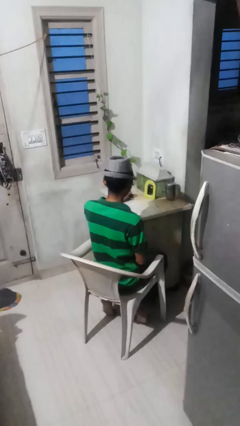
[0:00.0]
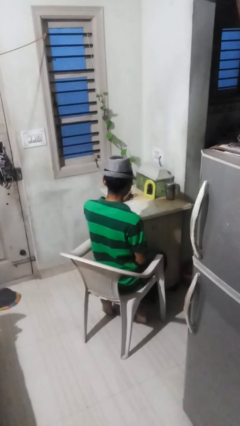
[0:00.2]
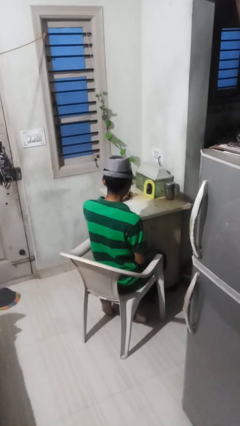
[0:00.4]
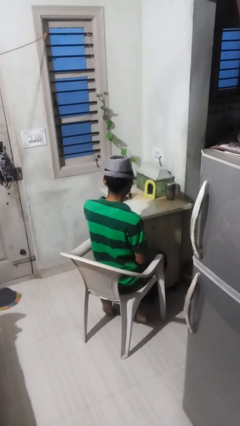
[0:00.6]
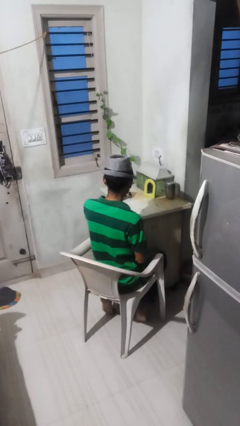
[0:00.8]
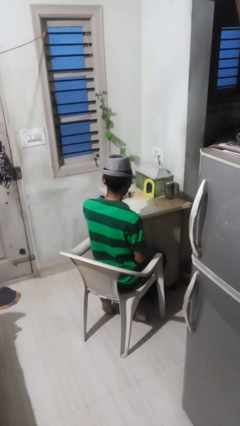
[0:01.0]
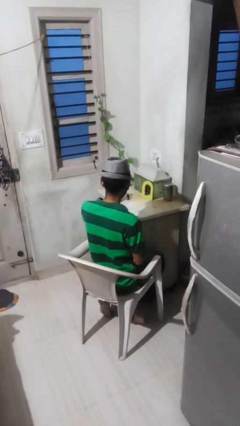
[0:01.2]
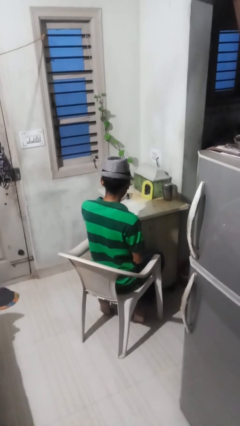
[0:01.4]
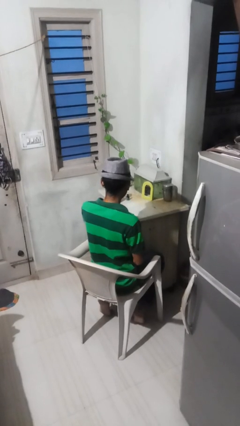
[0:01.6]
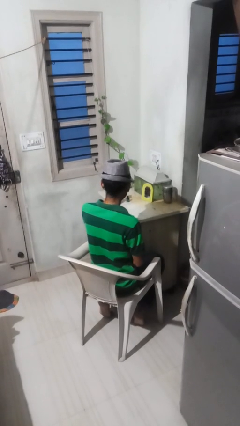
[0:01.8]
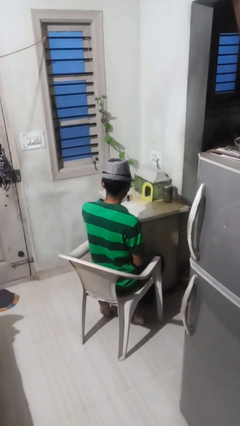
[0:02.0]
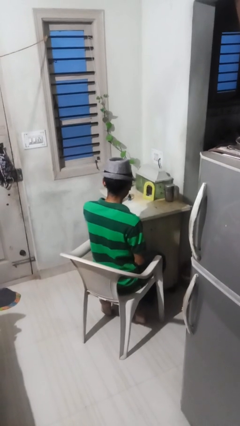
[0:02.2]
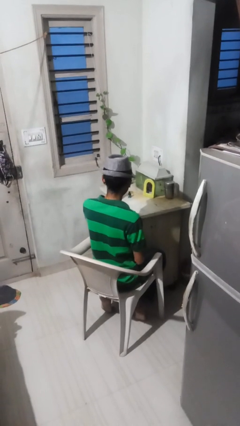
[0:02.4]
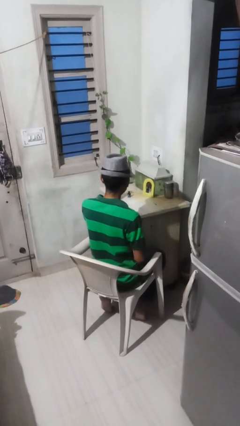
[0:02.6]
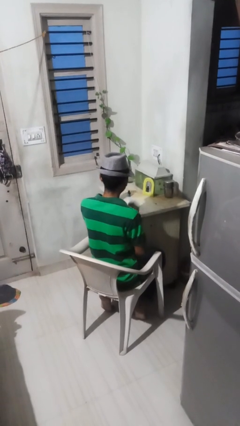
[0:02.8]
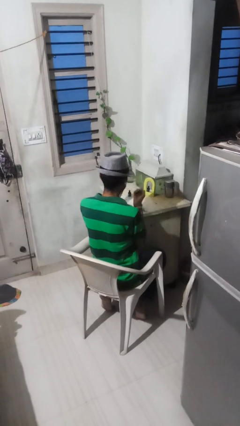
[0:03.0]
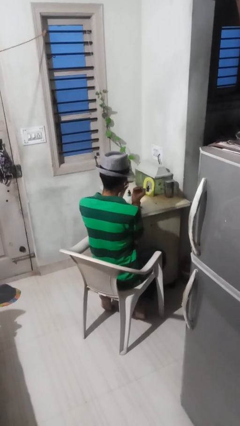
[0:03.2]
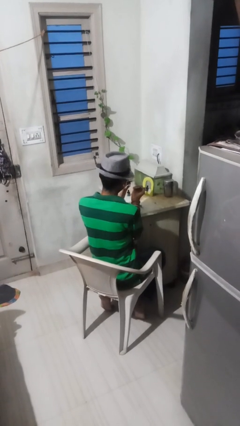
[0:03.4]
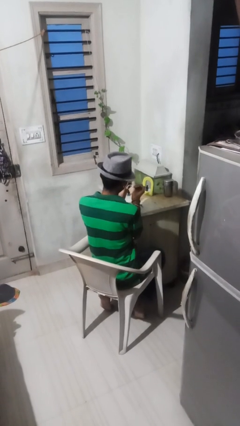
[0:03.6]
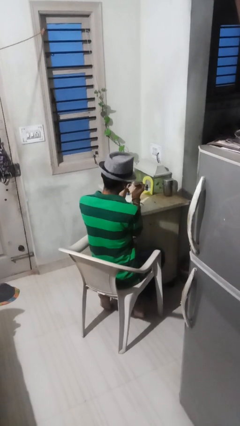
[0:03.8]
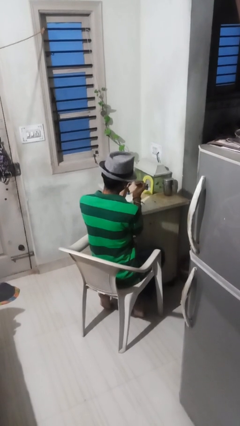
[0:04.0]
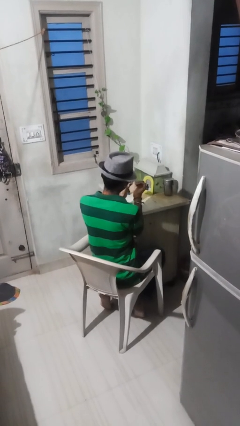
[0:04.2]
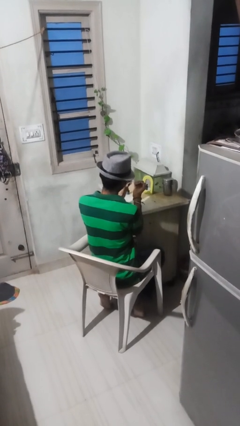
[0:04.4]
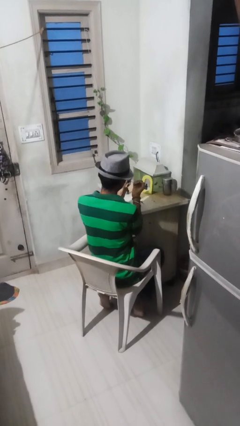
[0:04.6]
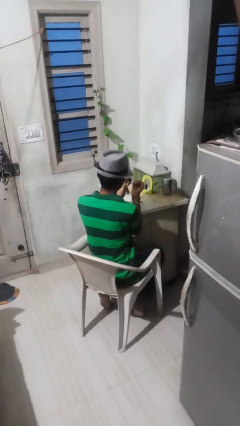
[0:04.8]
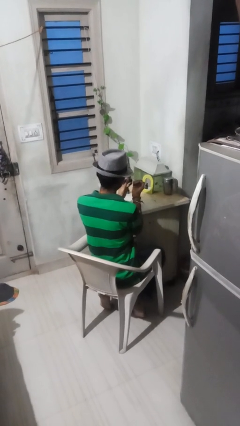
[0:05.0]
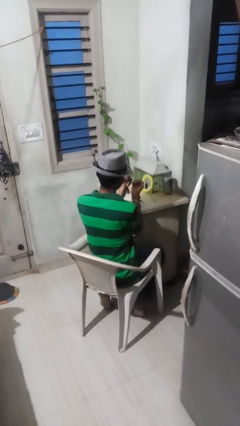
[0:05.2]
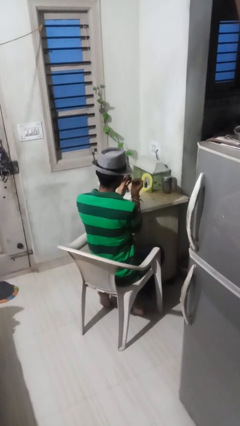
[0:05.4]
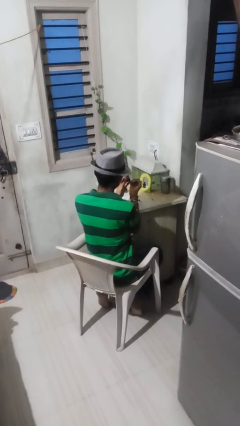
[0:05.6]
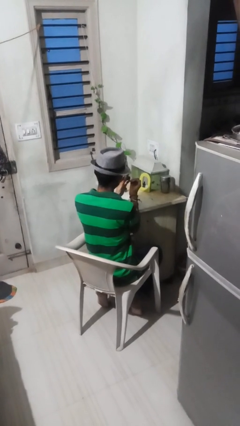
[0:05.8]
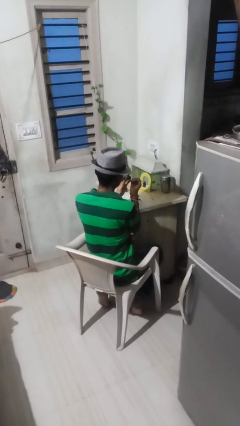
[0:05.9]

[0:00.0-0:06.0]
person paints fingernails

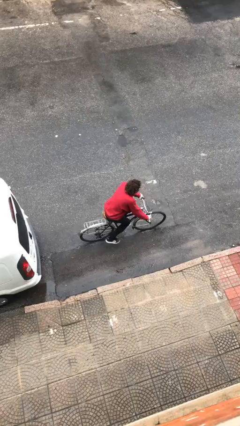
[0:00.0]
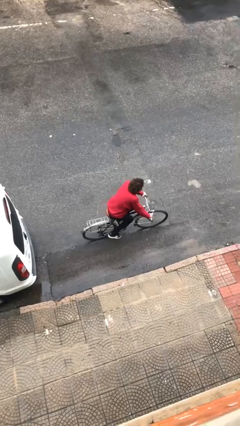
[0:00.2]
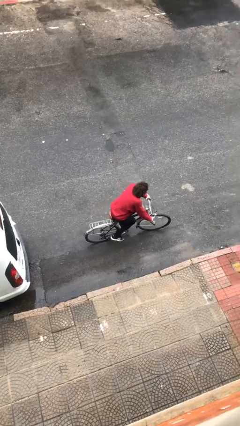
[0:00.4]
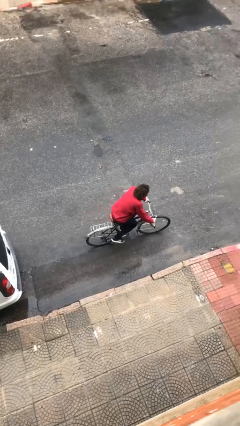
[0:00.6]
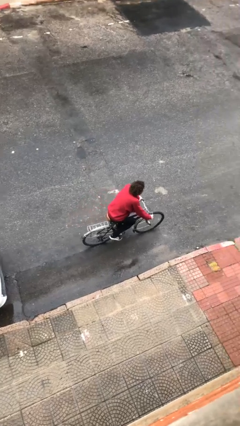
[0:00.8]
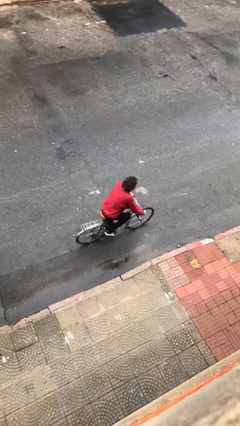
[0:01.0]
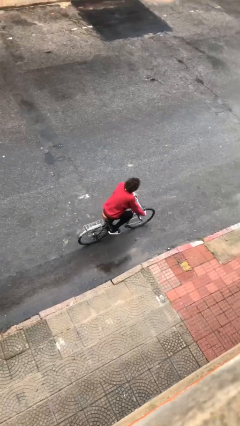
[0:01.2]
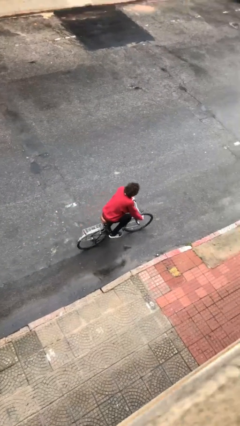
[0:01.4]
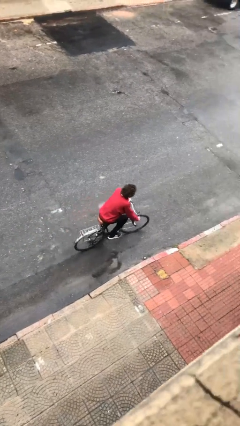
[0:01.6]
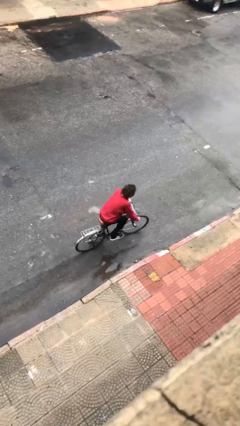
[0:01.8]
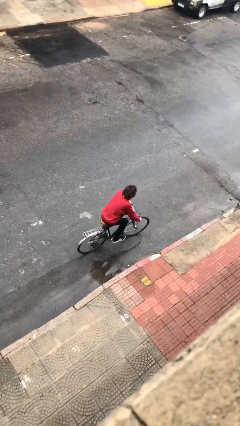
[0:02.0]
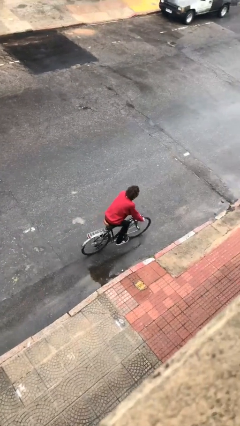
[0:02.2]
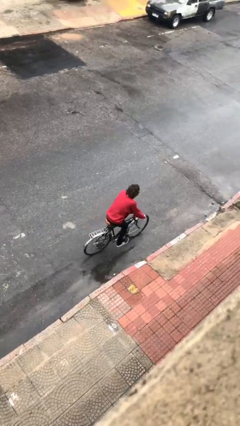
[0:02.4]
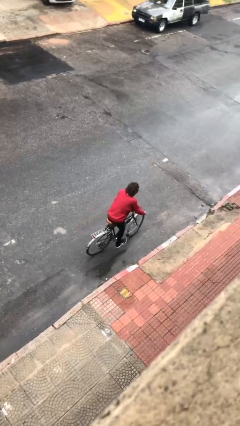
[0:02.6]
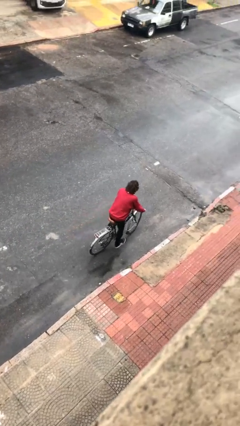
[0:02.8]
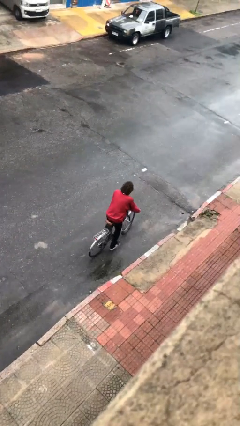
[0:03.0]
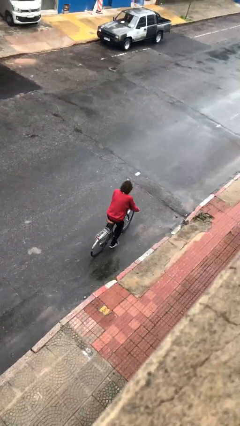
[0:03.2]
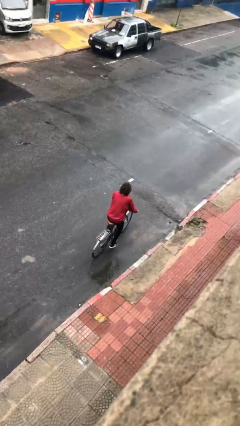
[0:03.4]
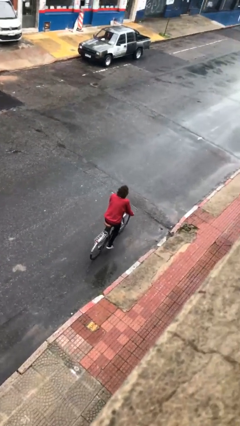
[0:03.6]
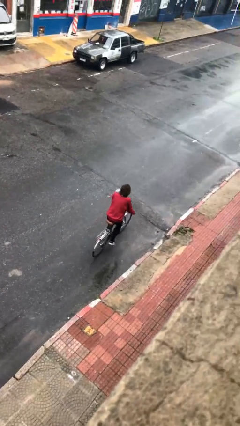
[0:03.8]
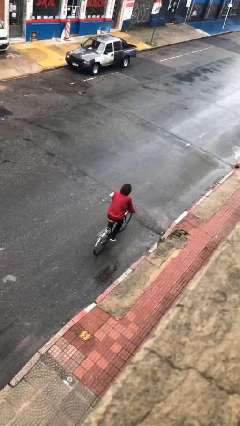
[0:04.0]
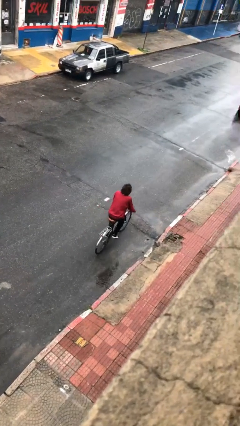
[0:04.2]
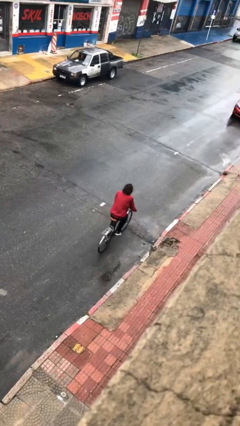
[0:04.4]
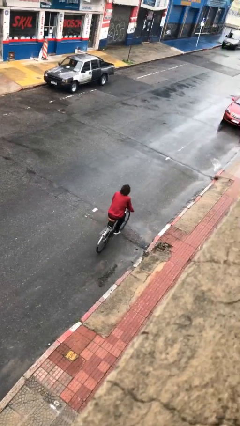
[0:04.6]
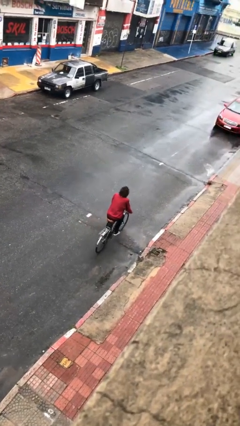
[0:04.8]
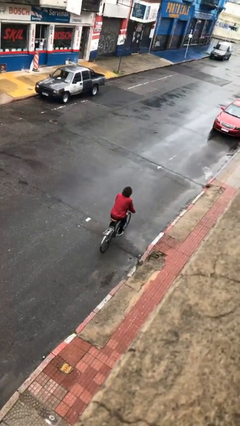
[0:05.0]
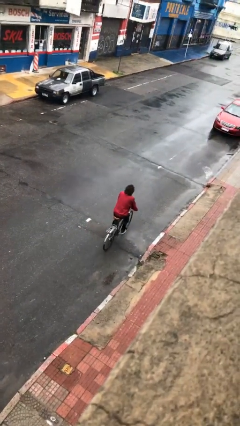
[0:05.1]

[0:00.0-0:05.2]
person rides bicycle

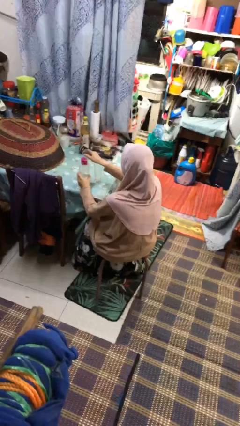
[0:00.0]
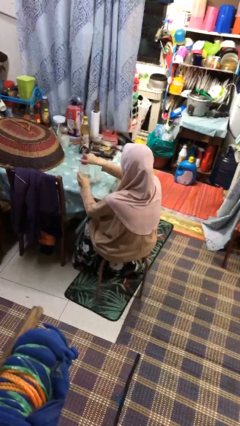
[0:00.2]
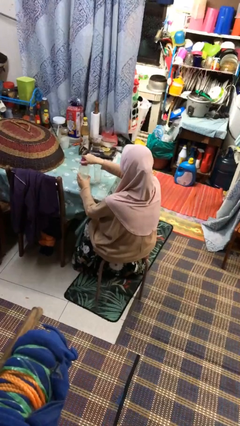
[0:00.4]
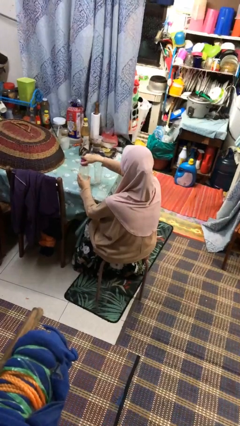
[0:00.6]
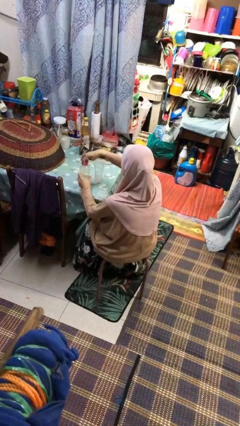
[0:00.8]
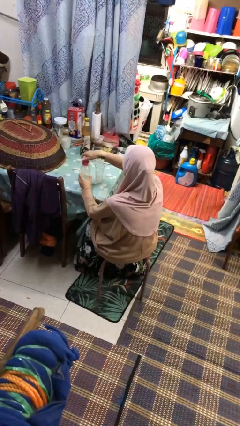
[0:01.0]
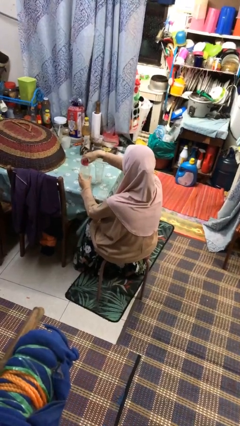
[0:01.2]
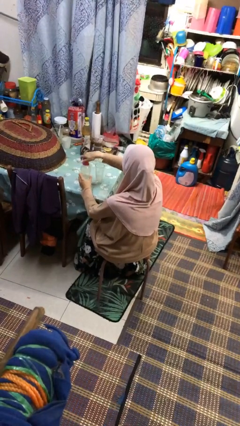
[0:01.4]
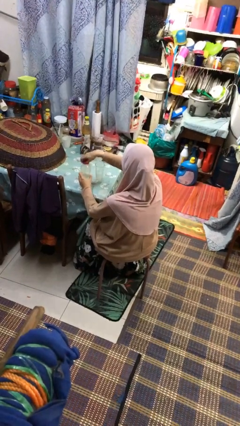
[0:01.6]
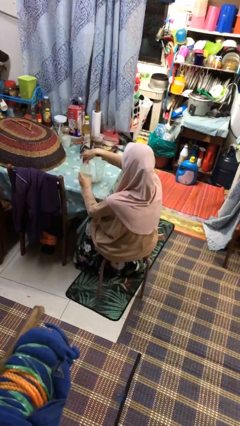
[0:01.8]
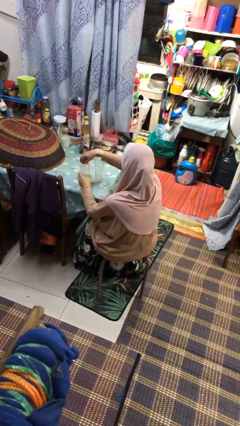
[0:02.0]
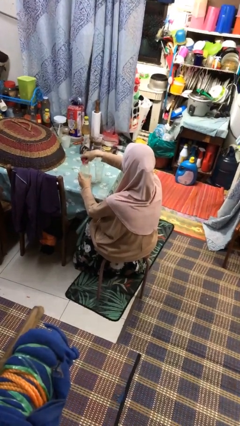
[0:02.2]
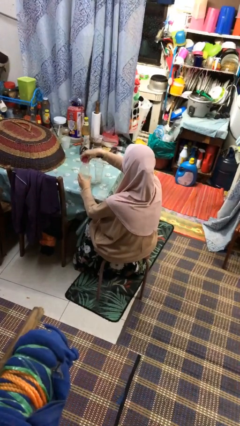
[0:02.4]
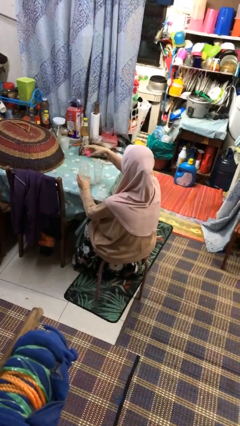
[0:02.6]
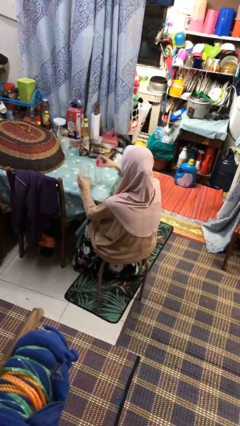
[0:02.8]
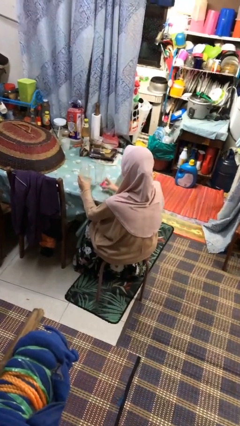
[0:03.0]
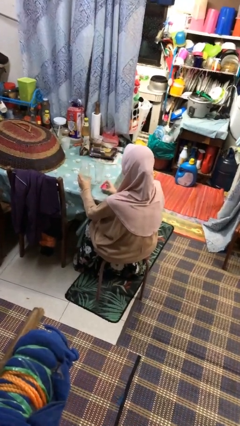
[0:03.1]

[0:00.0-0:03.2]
person unscrews lid from bottle

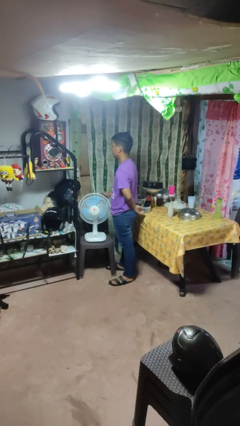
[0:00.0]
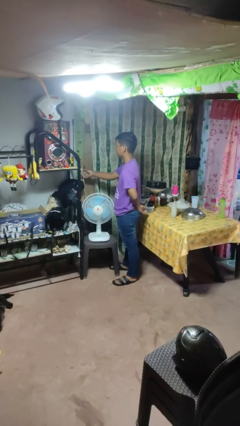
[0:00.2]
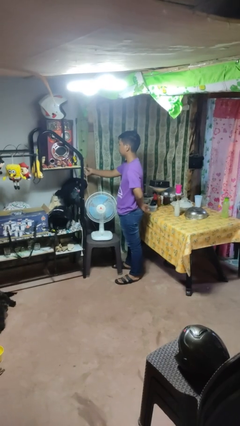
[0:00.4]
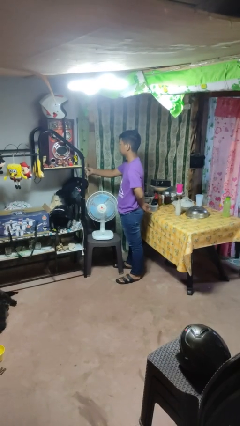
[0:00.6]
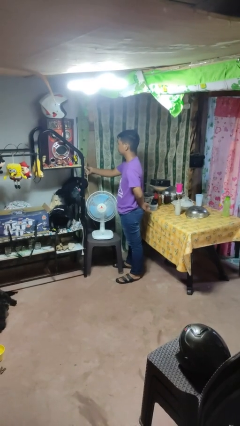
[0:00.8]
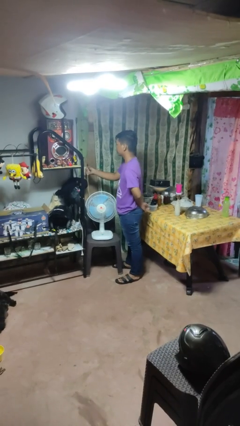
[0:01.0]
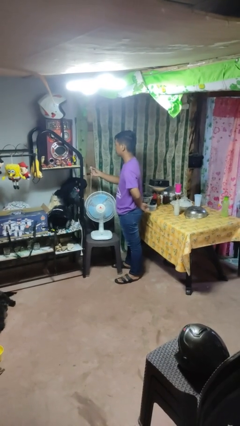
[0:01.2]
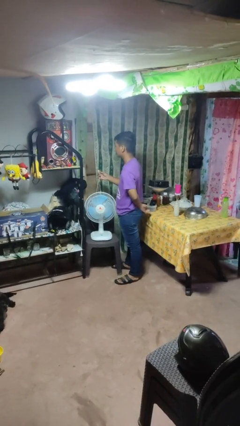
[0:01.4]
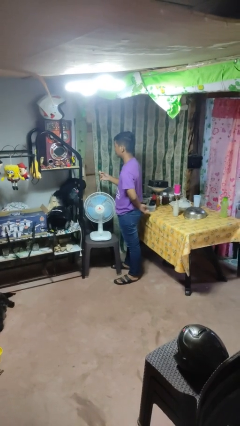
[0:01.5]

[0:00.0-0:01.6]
person unplugs from electrical socket

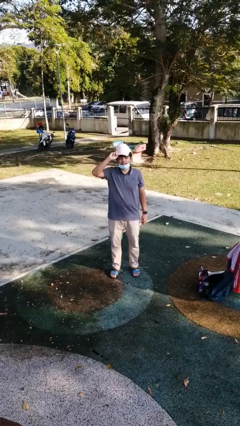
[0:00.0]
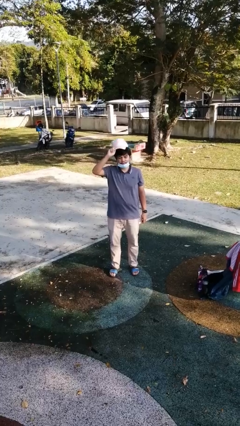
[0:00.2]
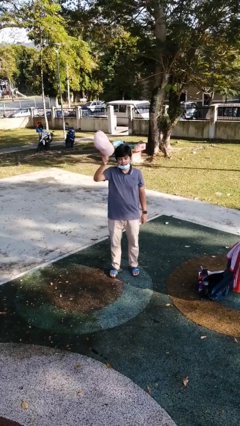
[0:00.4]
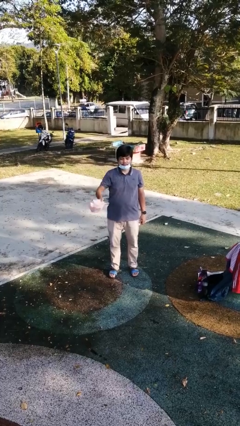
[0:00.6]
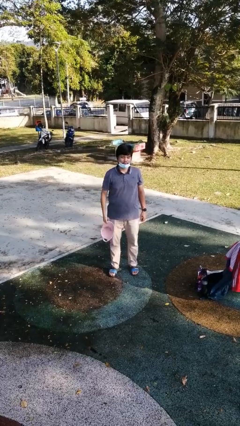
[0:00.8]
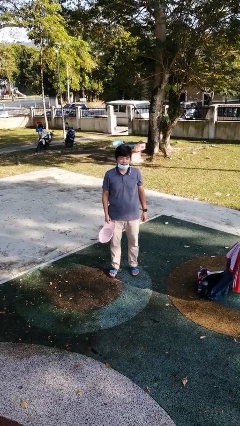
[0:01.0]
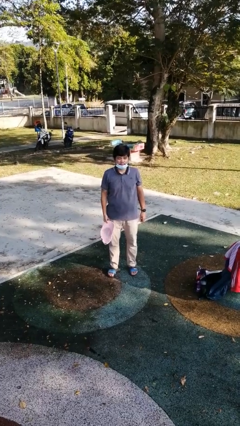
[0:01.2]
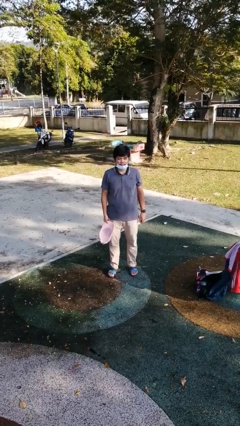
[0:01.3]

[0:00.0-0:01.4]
person takes off hat
